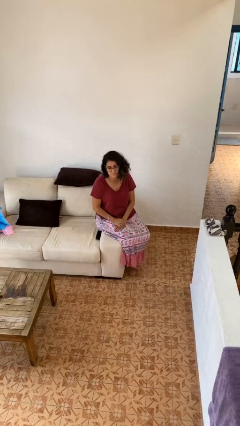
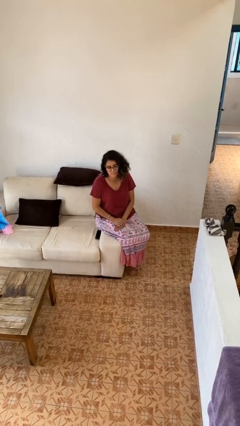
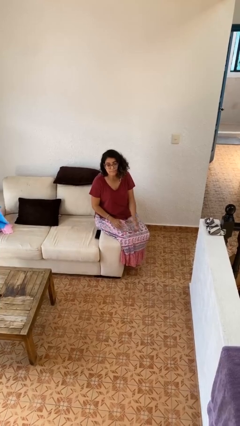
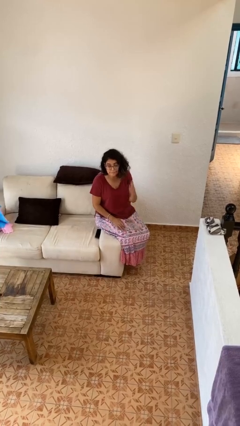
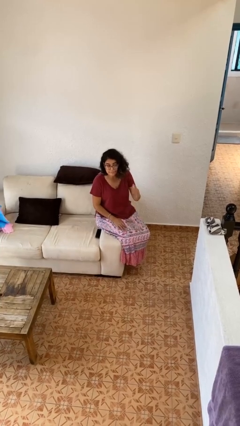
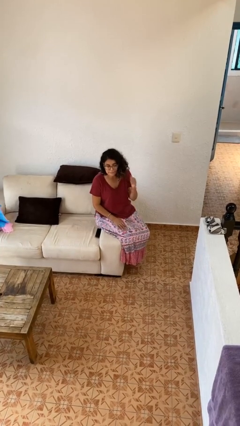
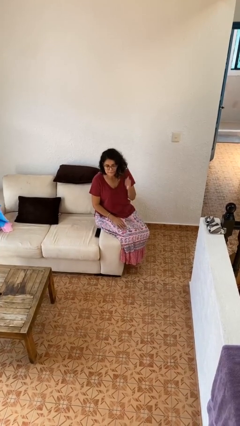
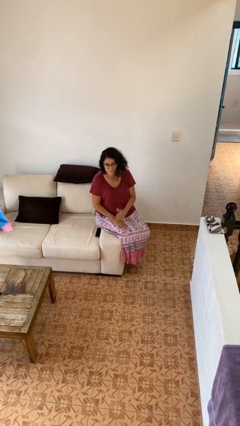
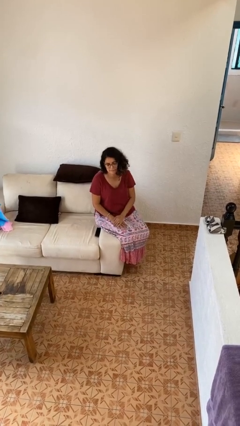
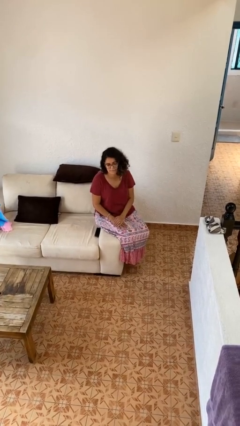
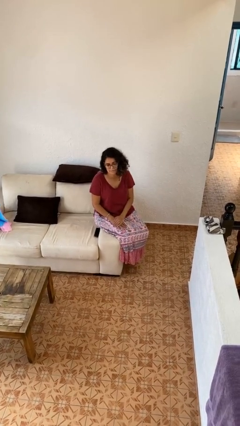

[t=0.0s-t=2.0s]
person gestures behind me

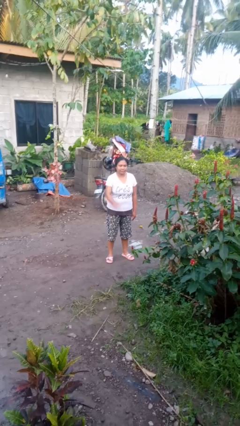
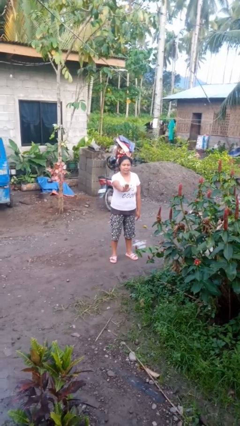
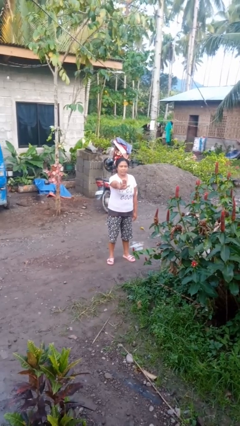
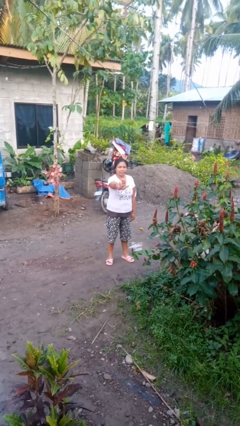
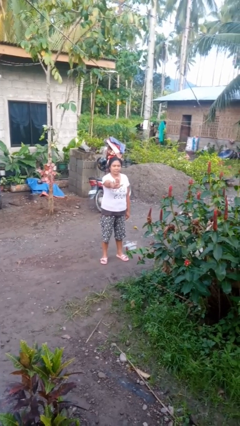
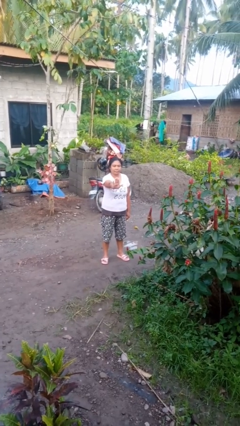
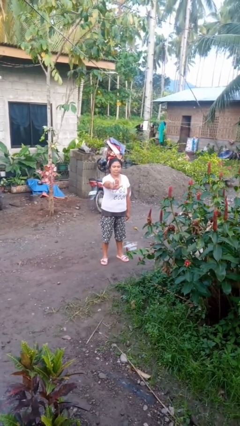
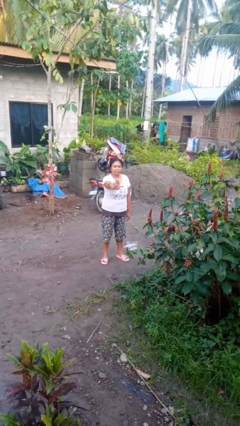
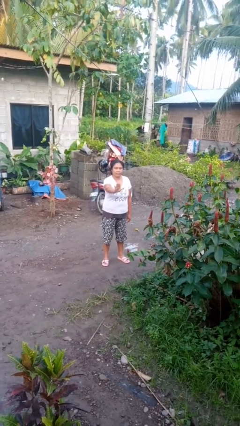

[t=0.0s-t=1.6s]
person gestures stop

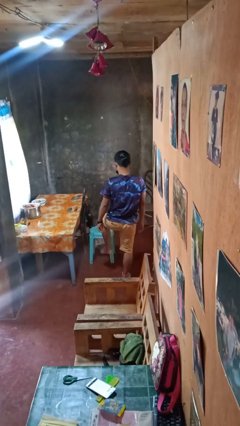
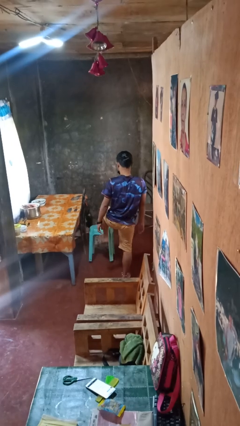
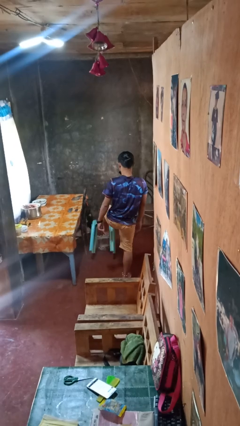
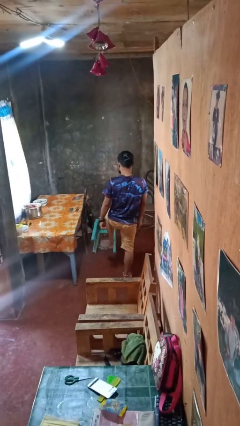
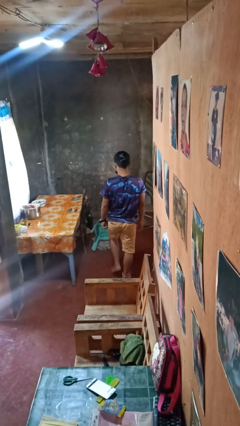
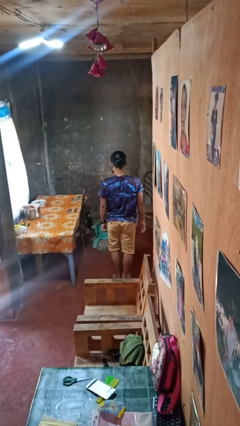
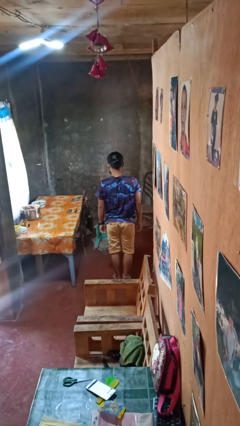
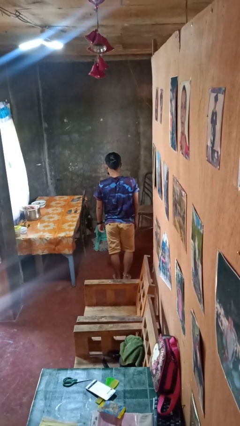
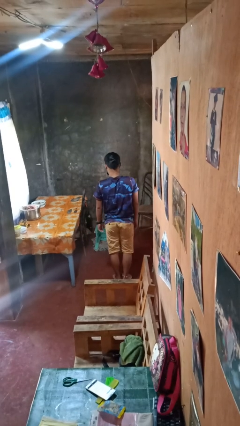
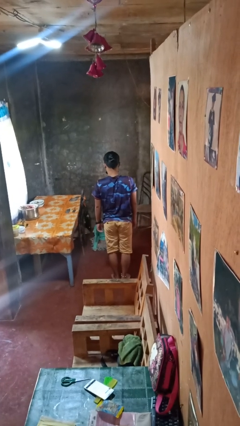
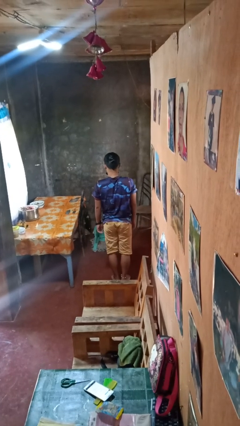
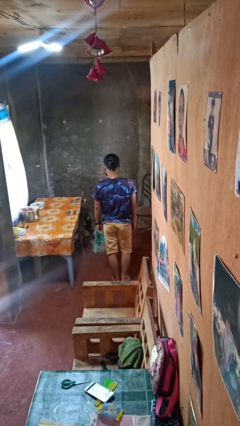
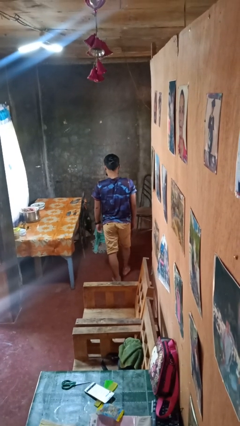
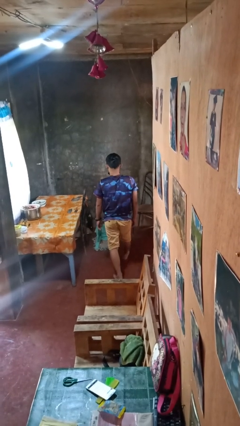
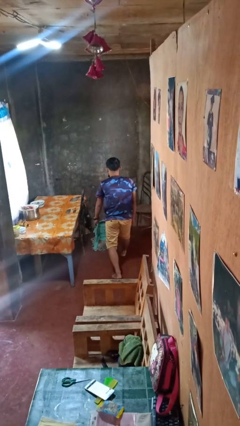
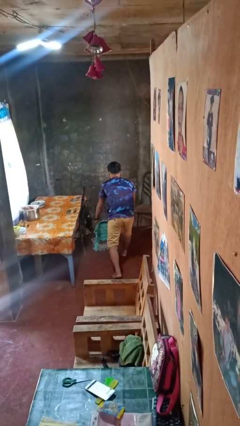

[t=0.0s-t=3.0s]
person knocks over furniture

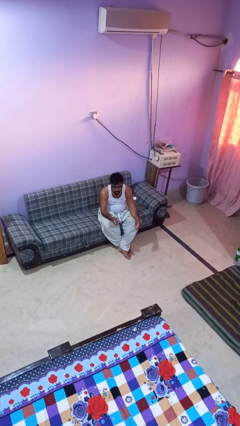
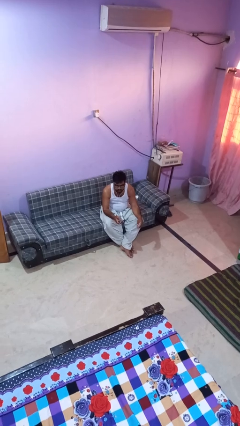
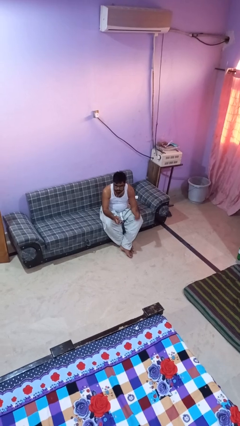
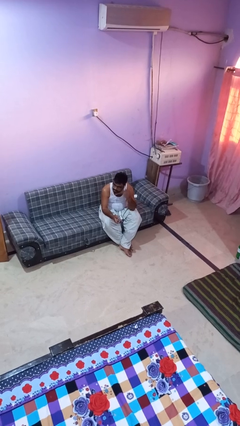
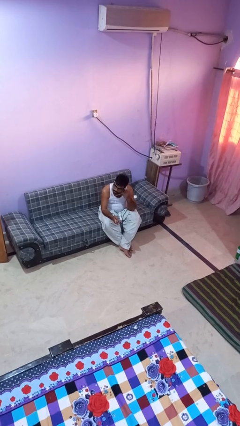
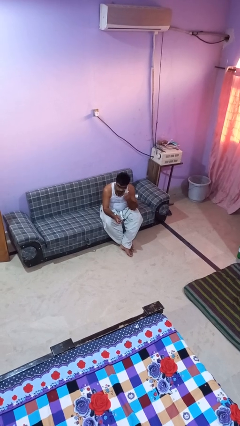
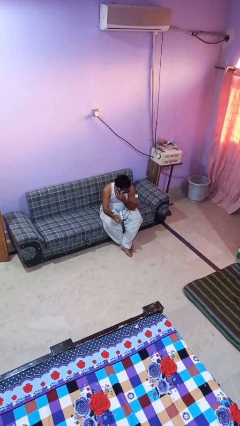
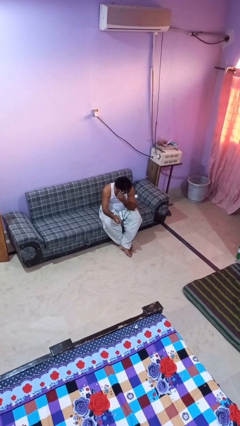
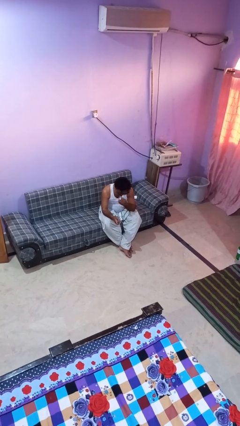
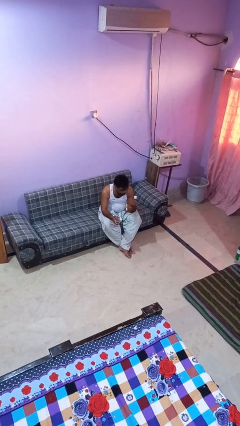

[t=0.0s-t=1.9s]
person takes off headphones

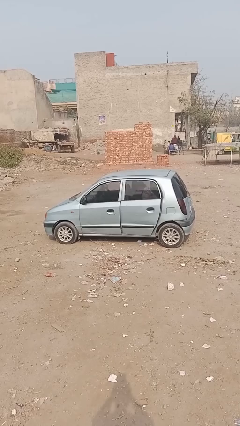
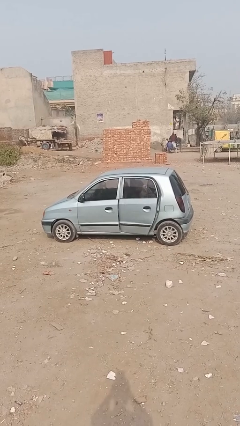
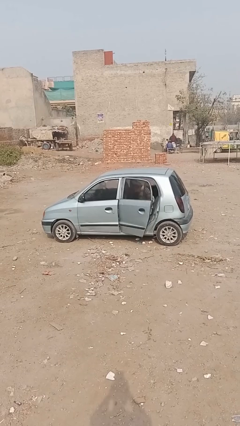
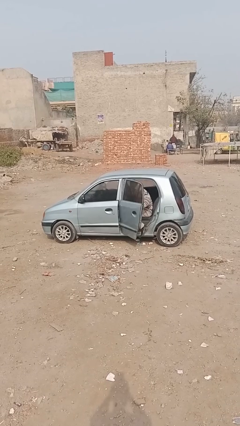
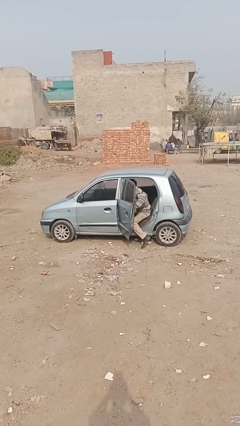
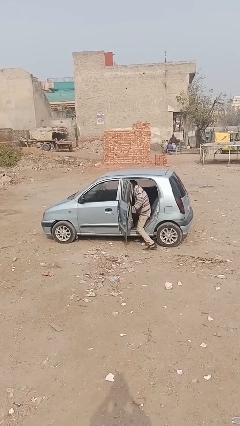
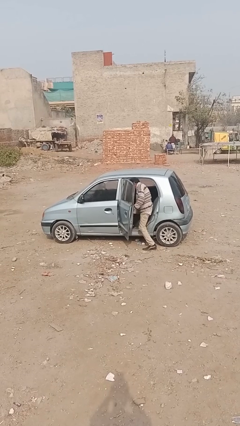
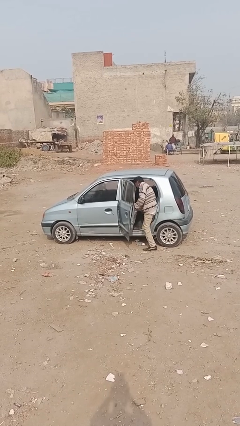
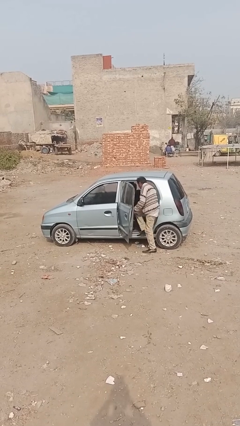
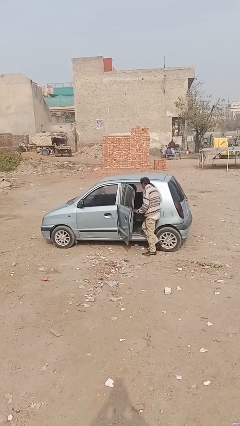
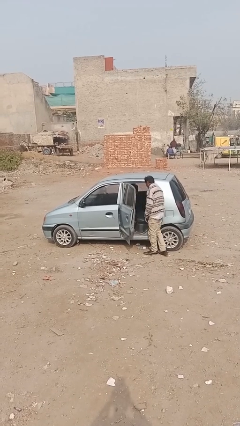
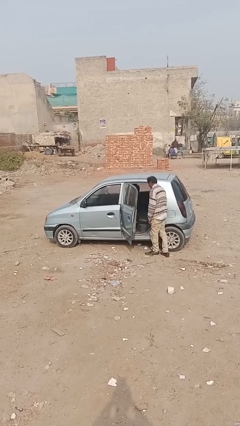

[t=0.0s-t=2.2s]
car drops off person

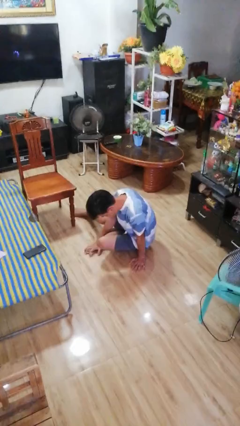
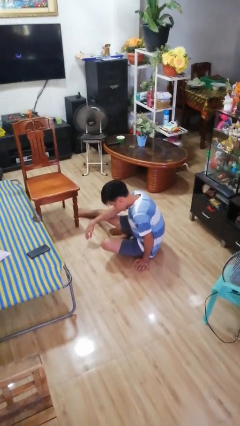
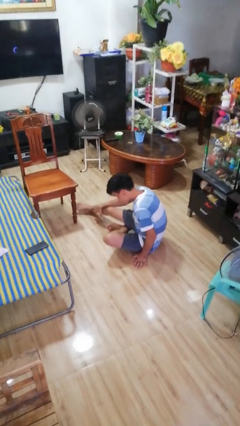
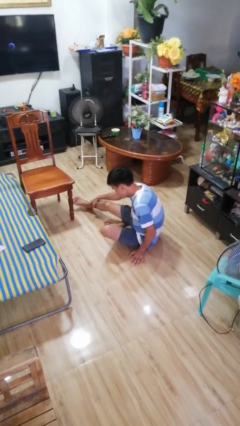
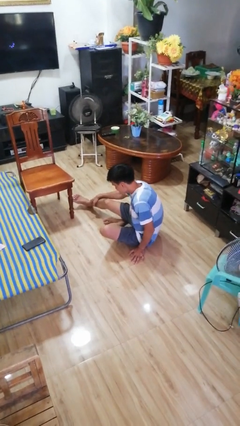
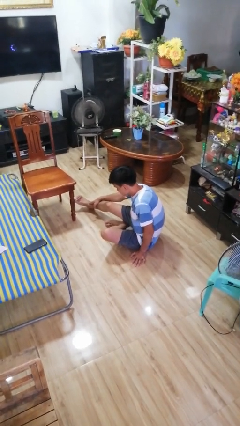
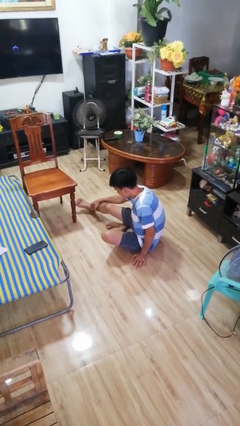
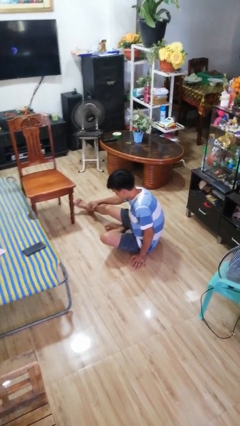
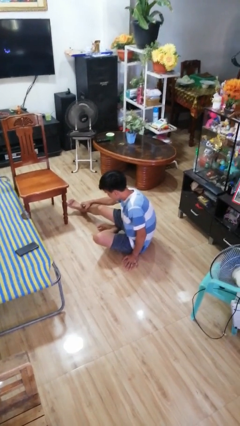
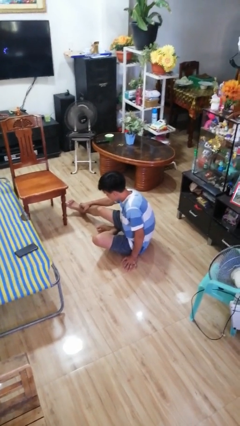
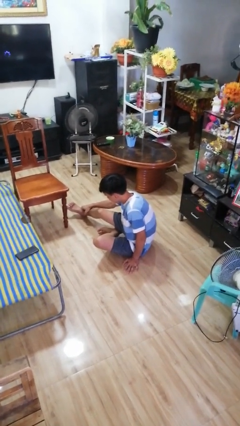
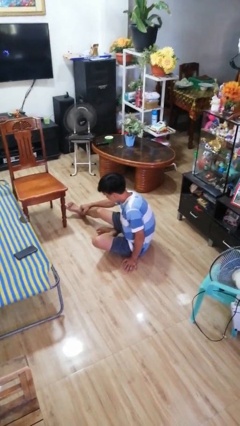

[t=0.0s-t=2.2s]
person lies down on floor

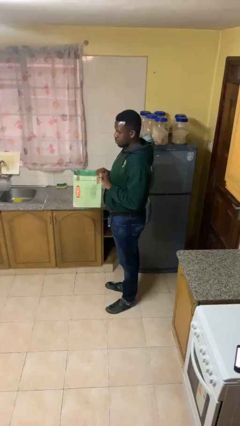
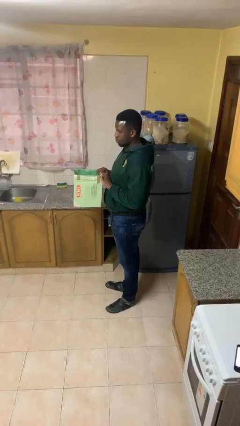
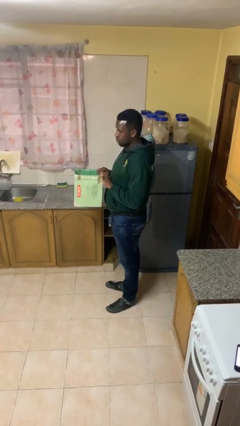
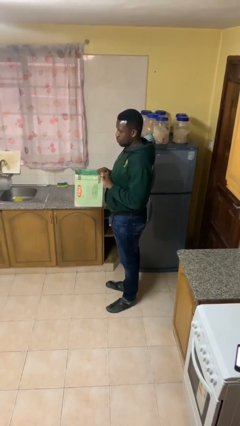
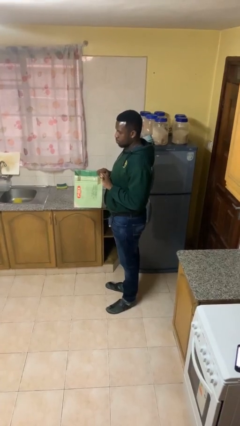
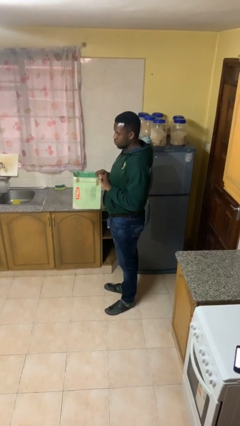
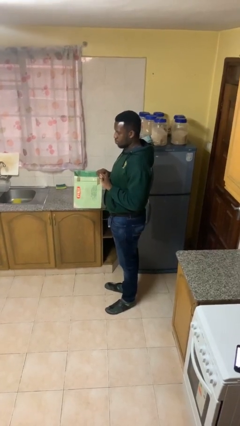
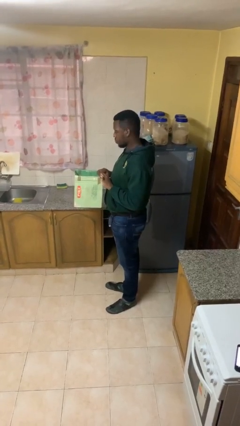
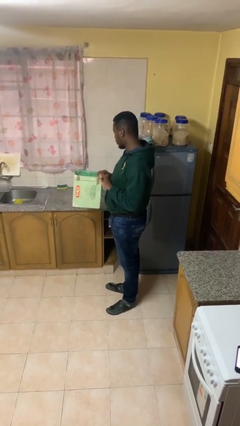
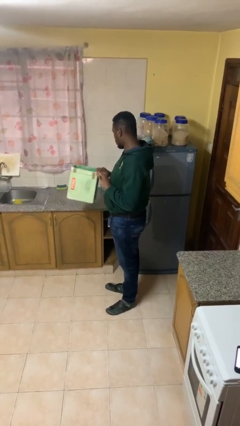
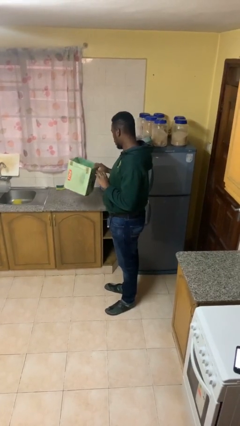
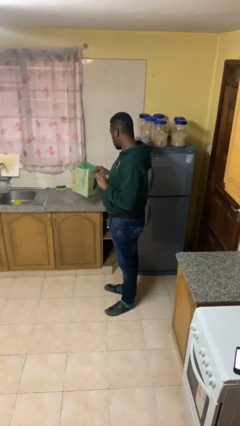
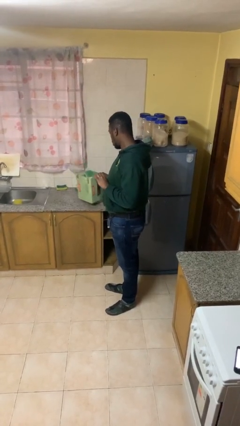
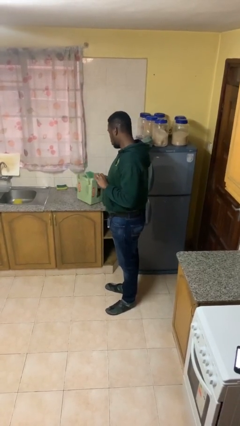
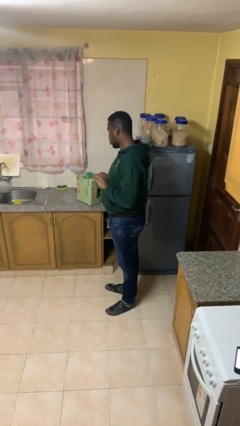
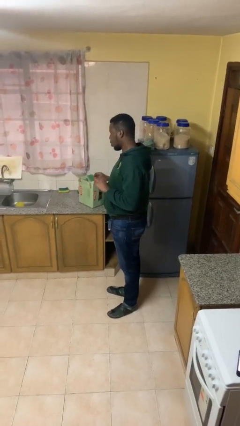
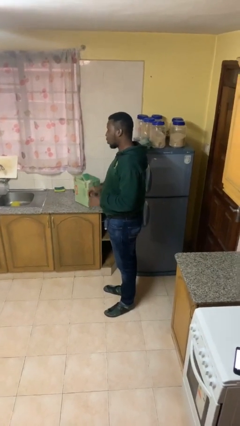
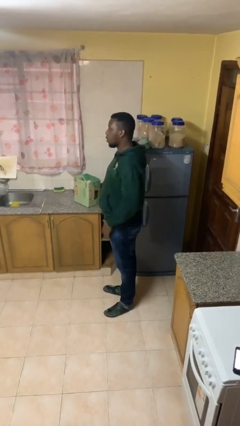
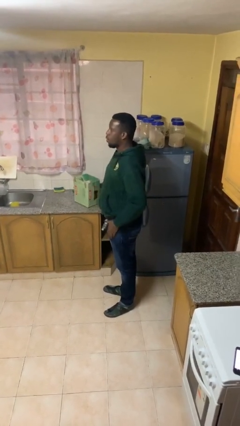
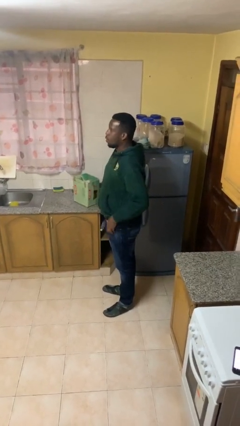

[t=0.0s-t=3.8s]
person puts down object on table

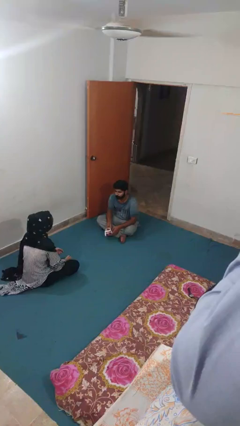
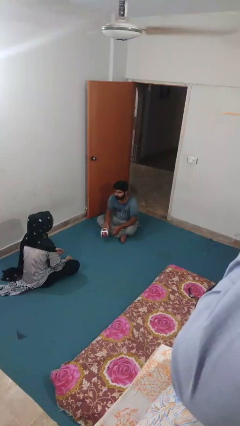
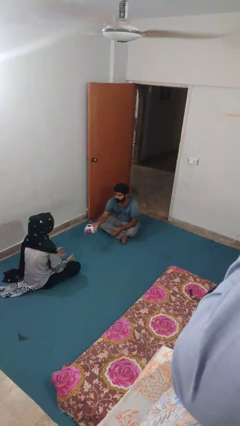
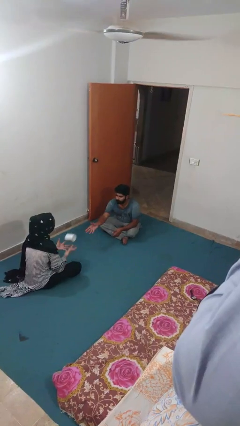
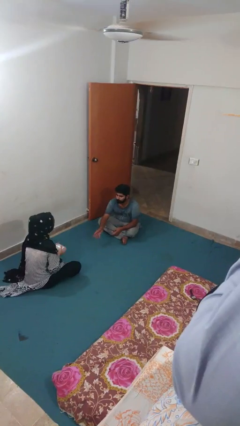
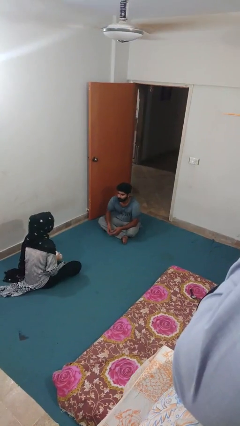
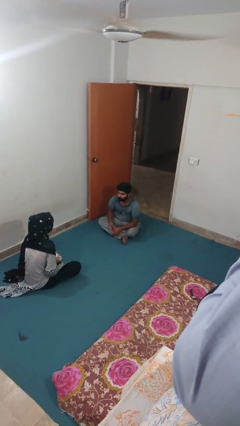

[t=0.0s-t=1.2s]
person throws object to person
